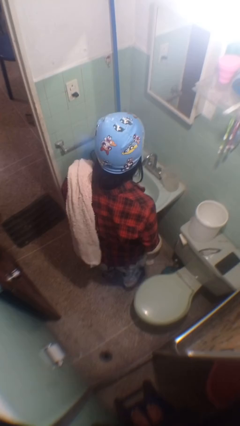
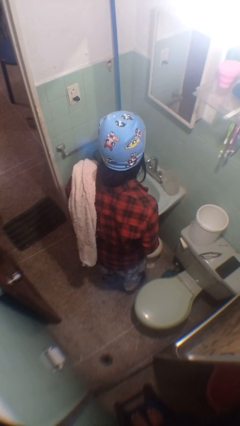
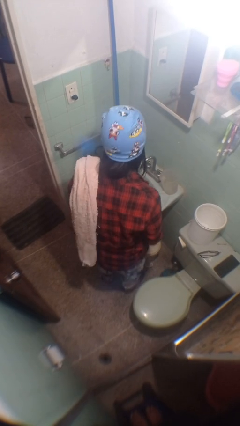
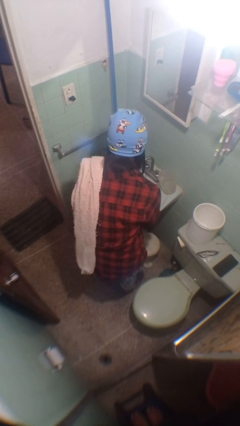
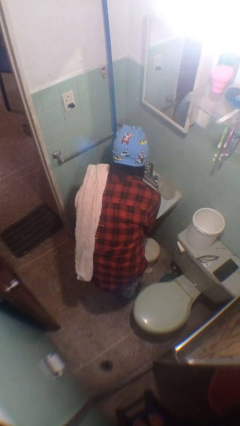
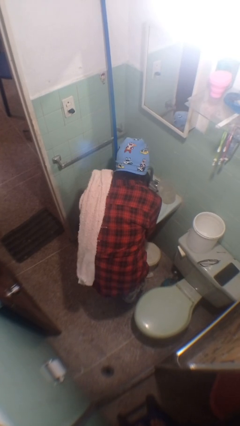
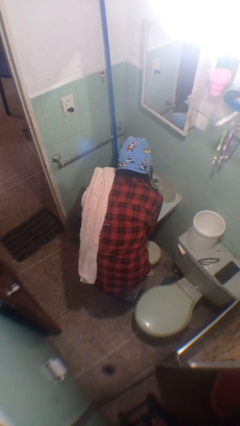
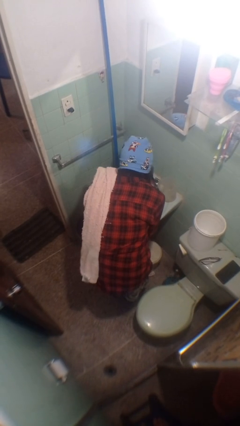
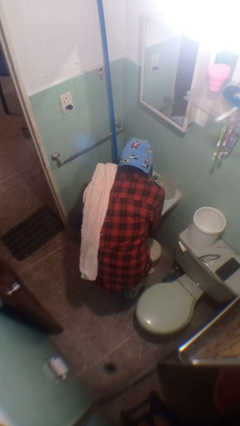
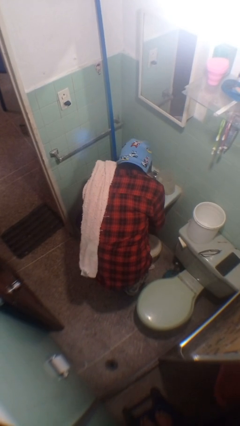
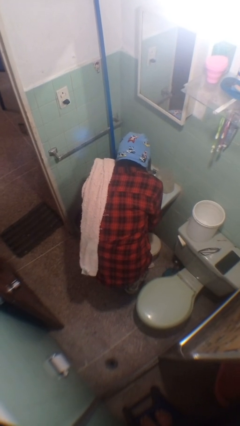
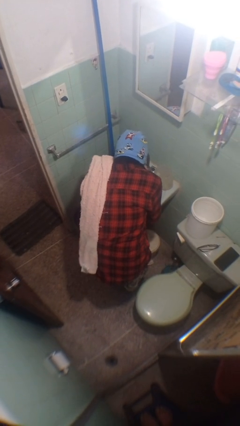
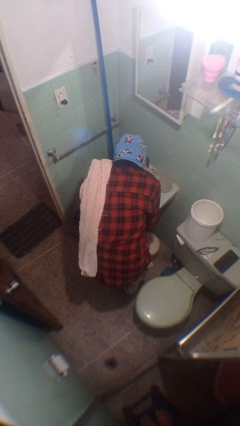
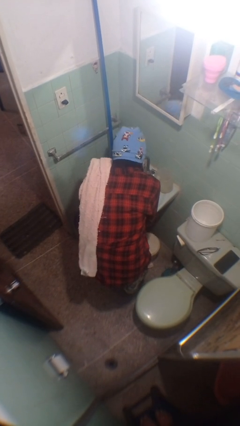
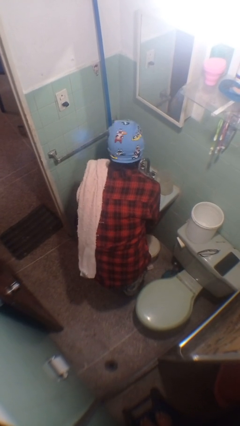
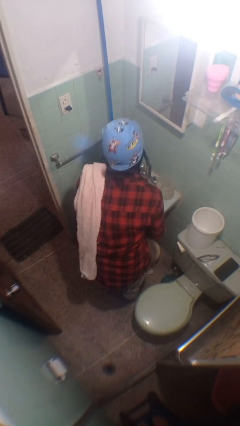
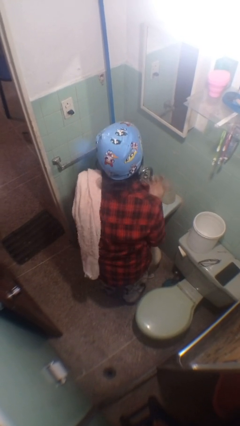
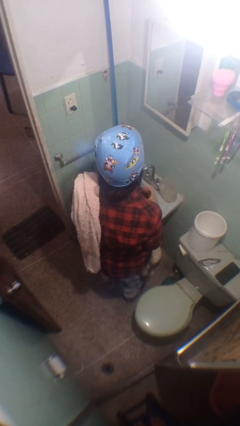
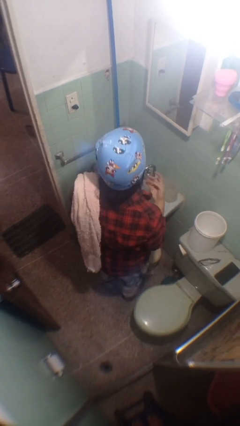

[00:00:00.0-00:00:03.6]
person washes face

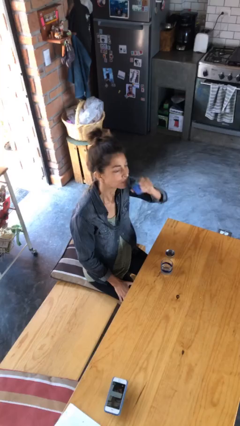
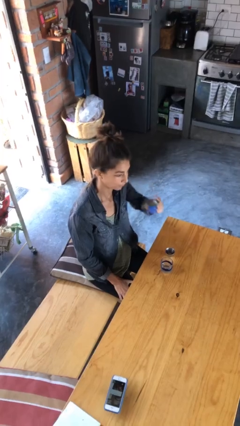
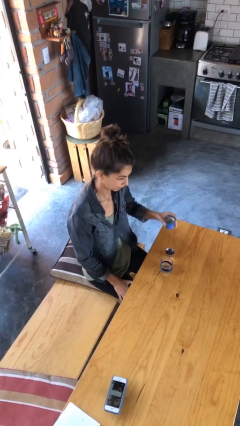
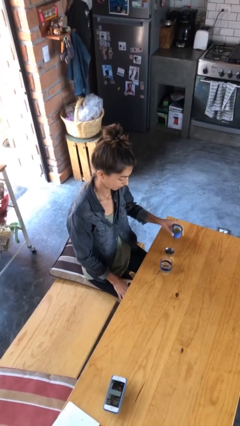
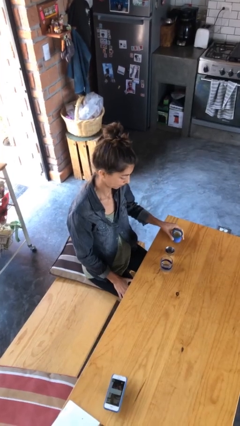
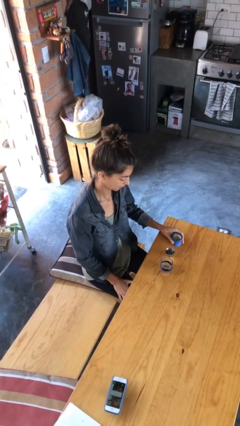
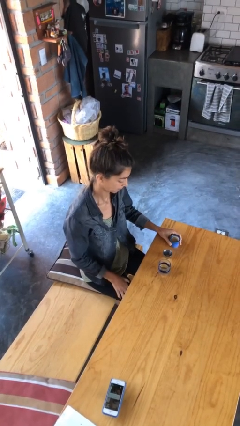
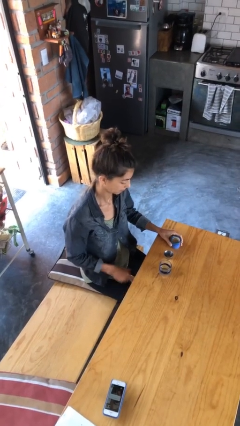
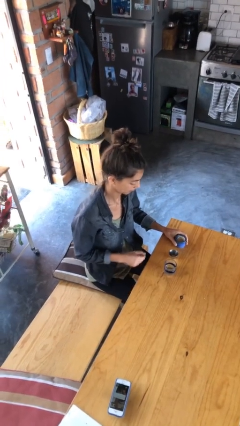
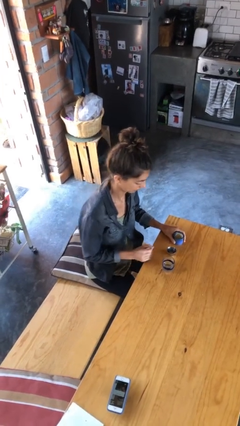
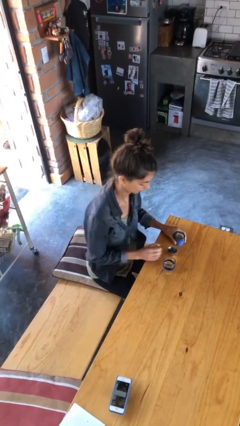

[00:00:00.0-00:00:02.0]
person puts down object on table

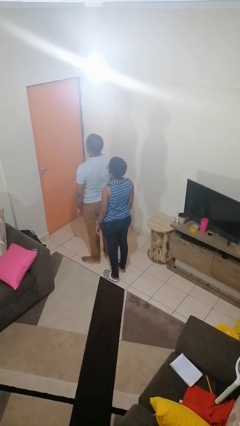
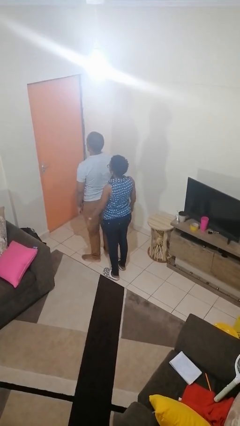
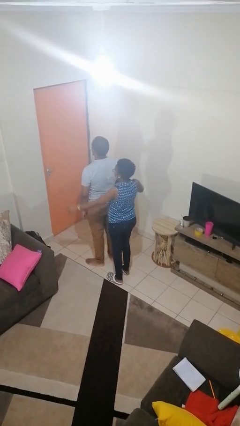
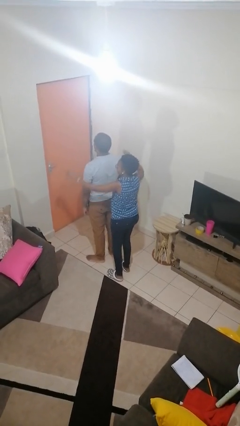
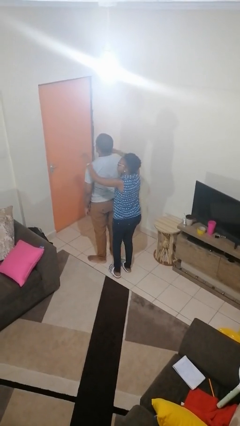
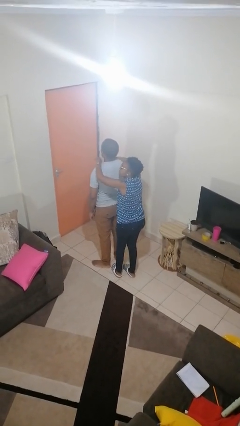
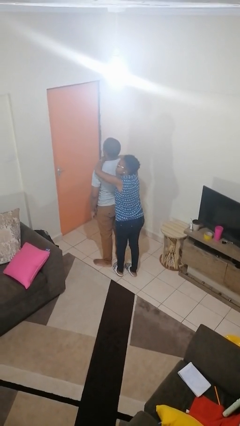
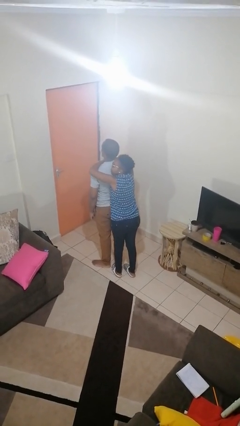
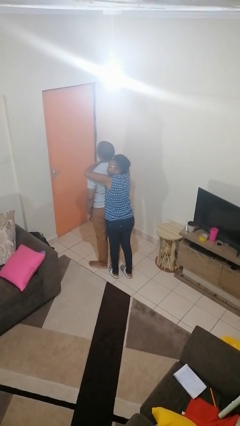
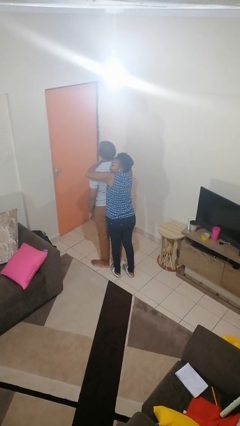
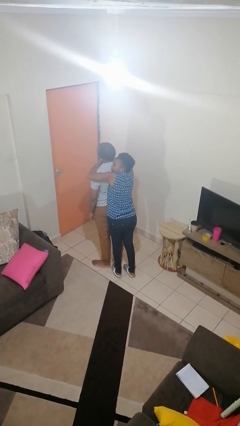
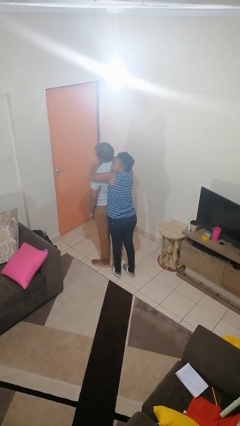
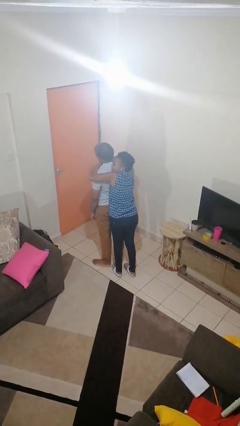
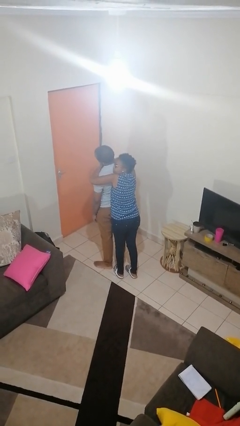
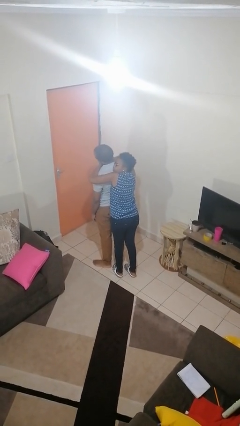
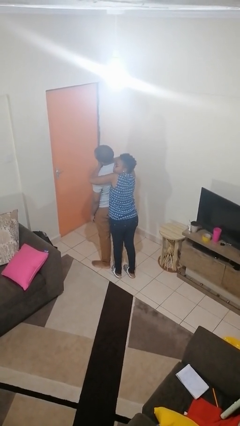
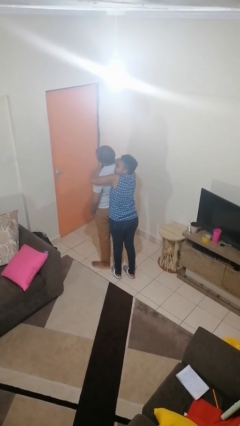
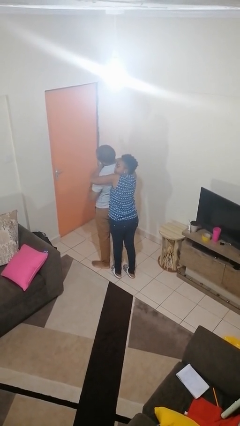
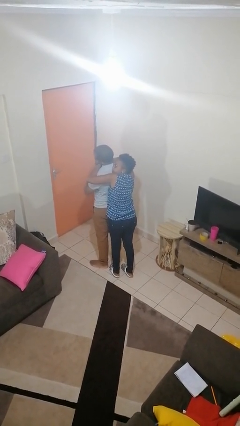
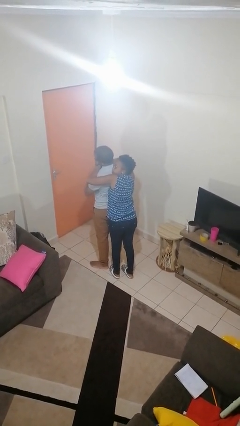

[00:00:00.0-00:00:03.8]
person hugs person from behind

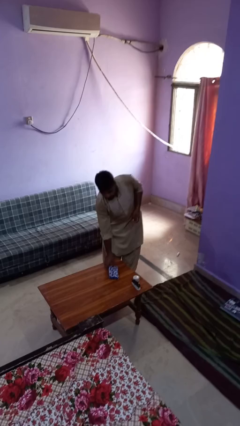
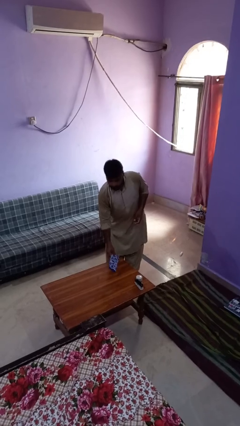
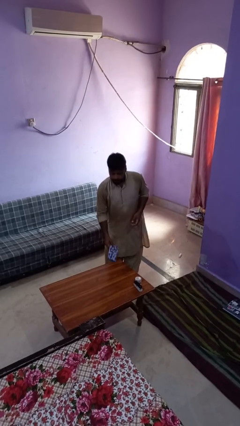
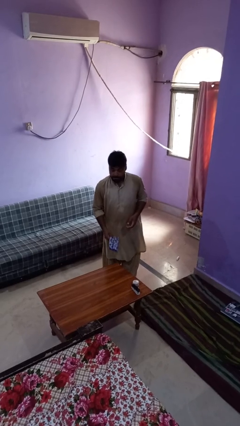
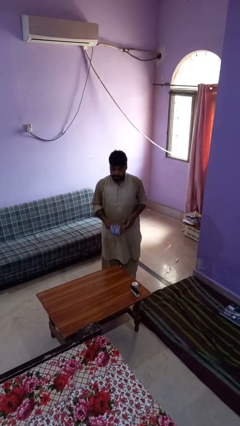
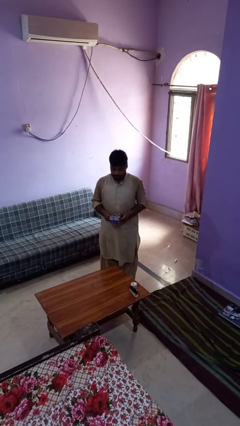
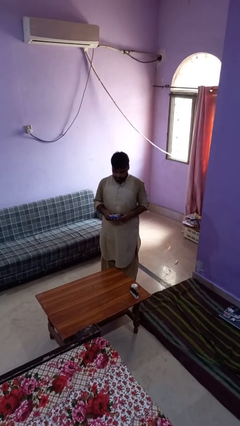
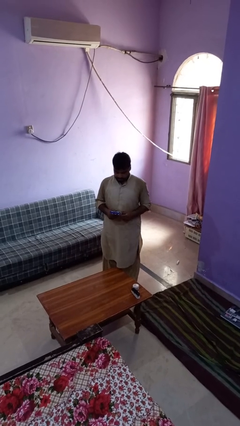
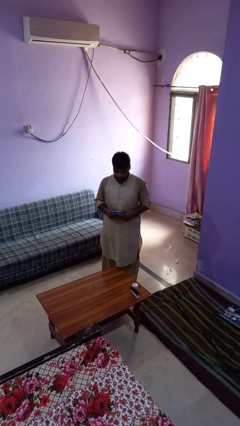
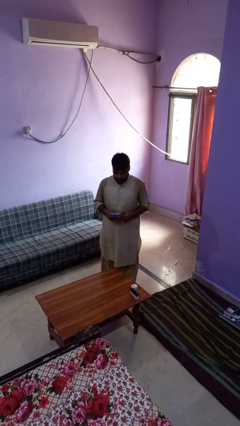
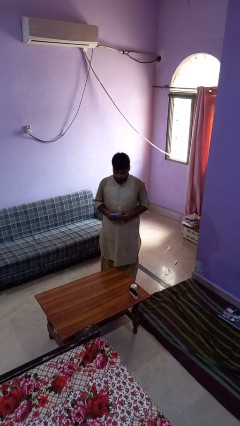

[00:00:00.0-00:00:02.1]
person picks up object from table

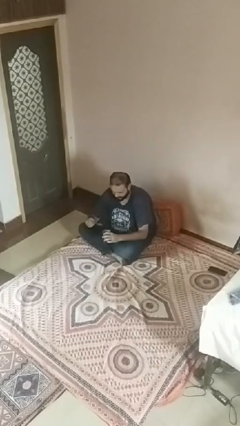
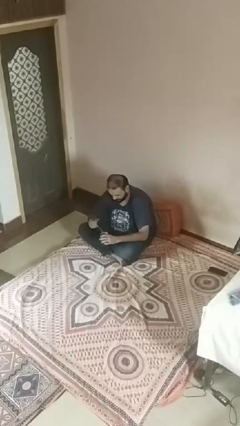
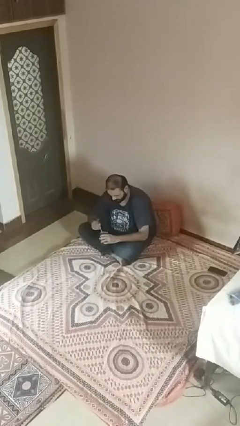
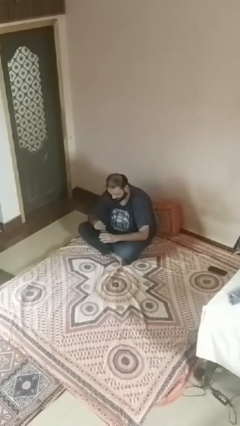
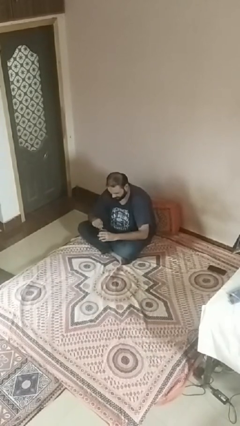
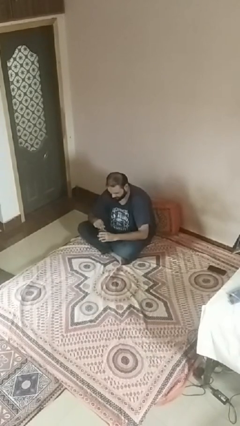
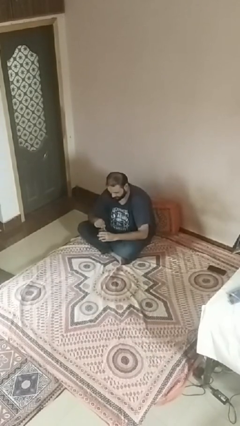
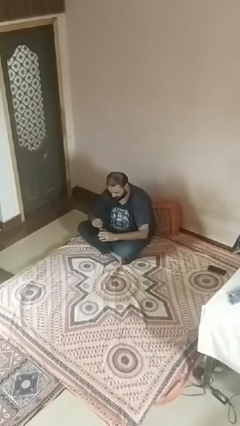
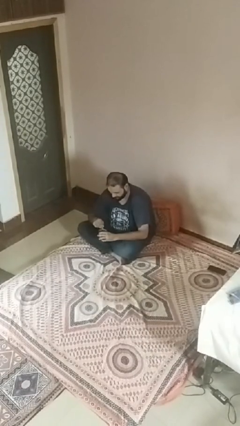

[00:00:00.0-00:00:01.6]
person stirs mug

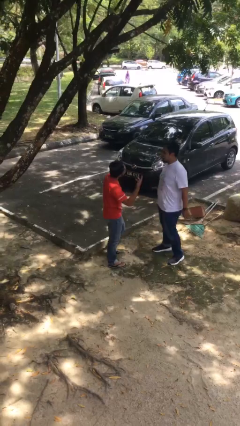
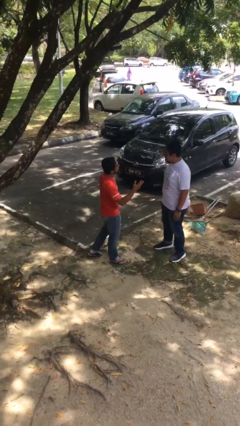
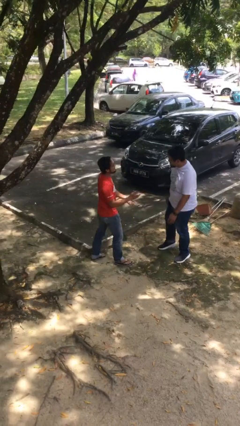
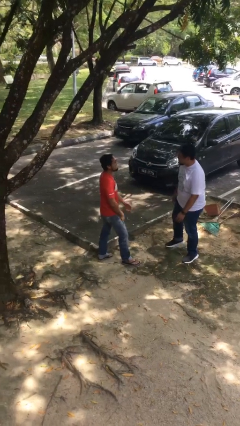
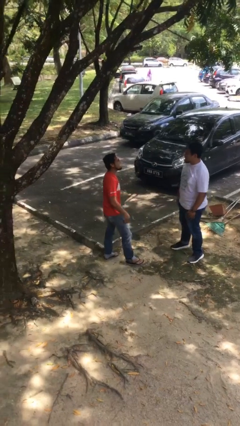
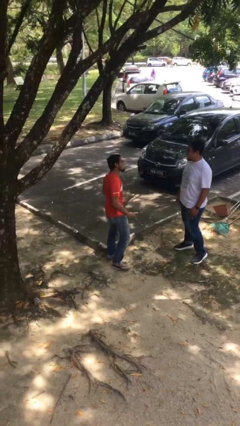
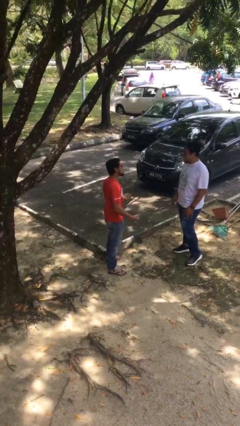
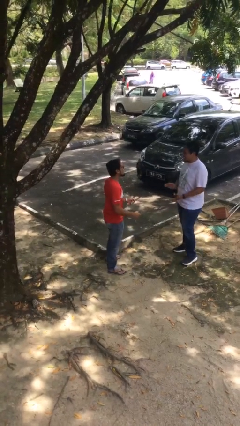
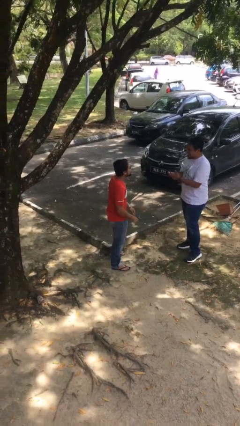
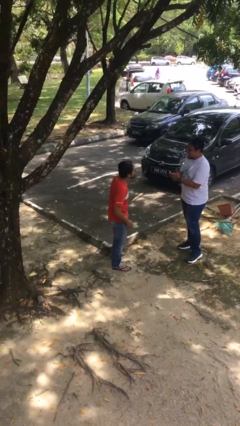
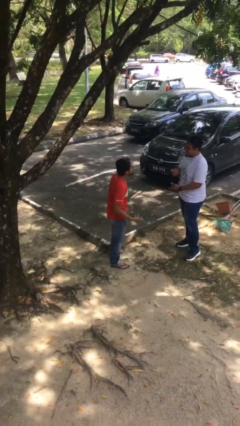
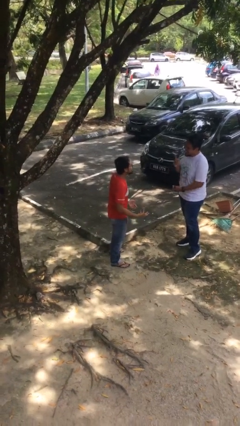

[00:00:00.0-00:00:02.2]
person talks to person

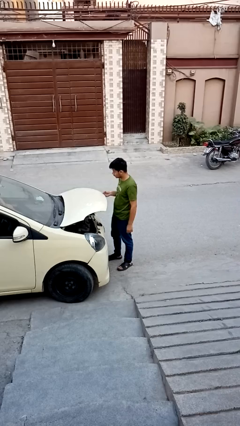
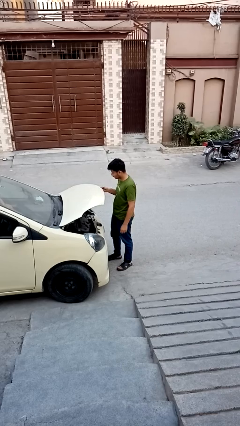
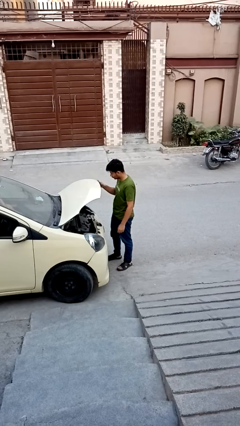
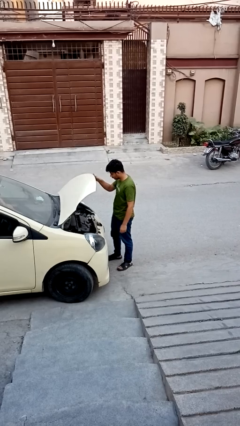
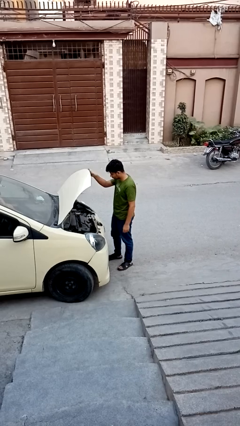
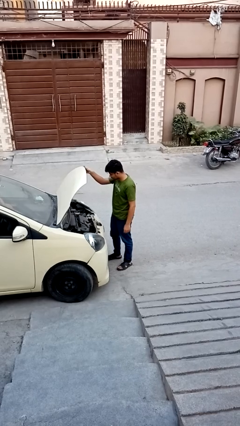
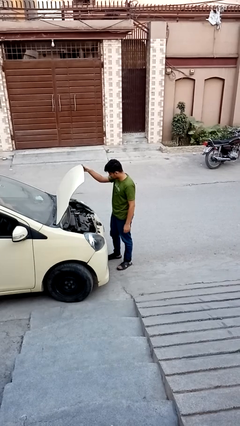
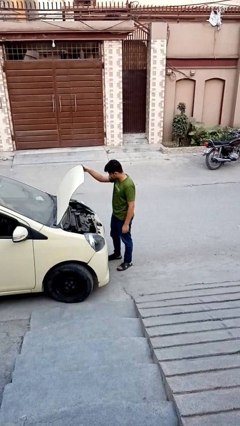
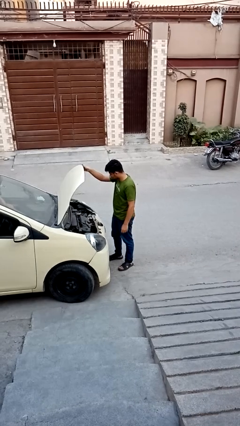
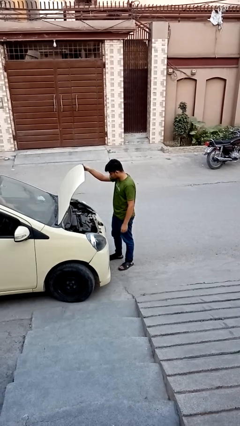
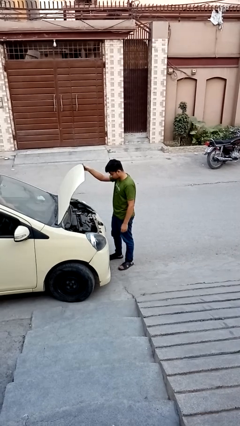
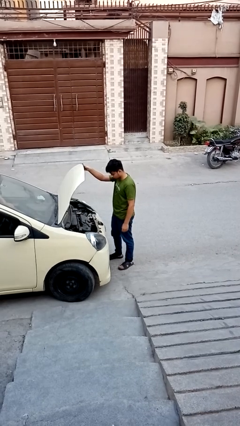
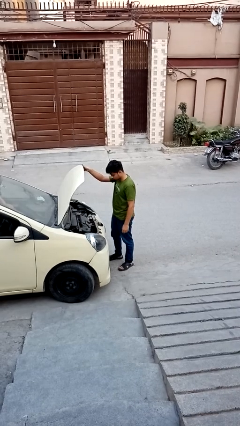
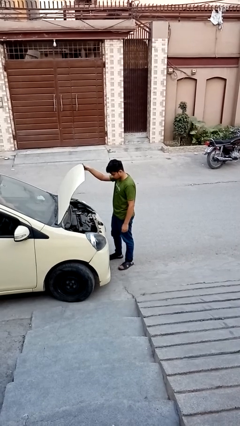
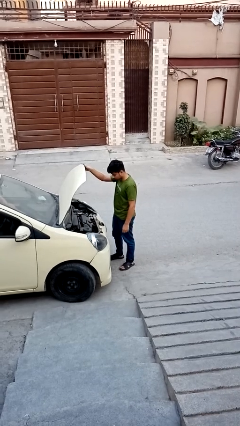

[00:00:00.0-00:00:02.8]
person opens car hood
